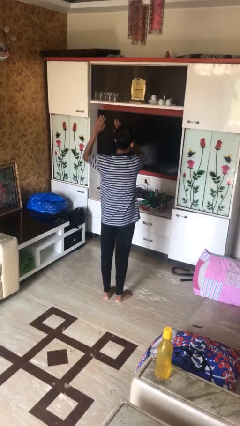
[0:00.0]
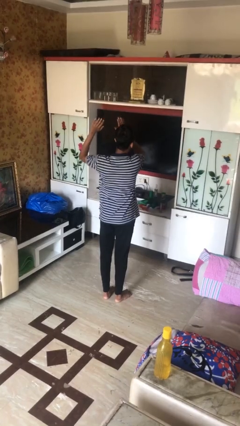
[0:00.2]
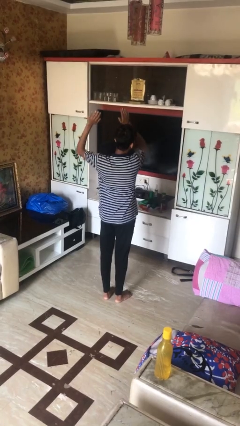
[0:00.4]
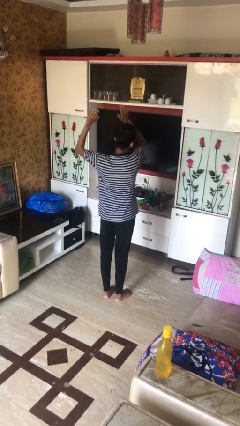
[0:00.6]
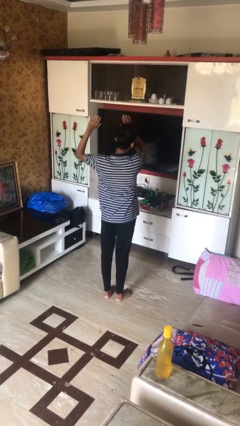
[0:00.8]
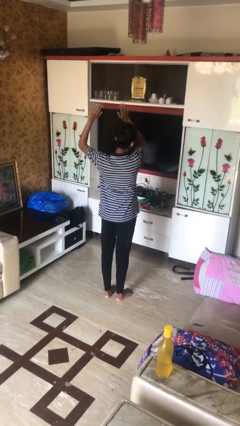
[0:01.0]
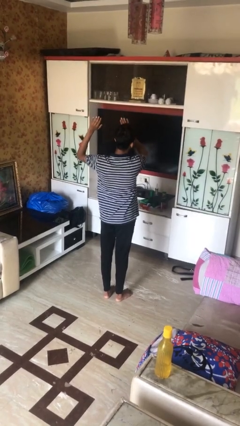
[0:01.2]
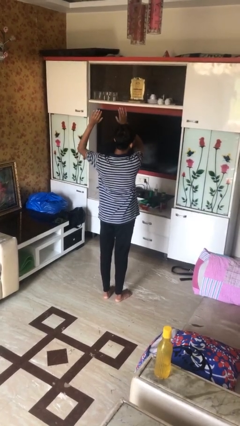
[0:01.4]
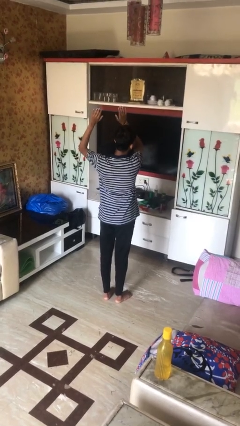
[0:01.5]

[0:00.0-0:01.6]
person dances in place

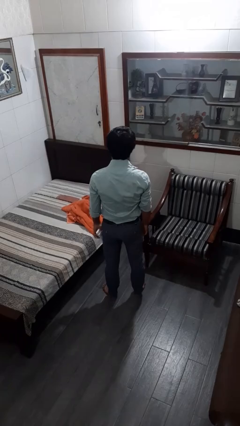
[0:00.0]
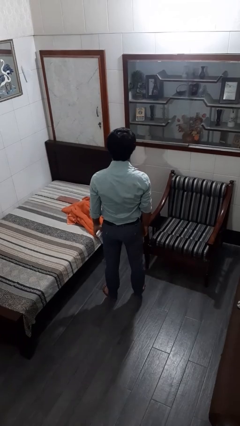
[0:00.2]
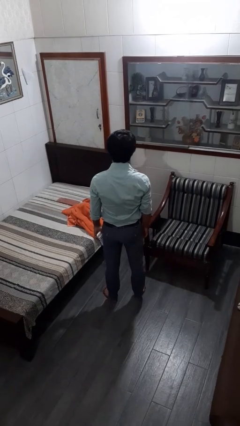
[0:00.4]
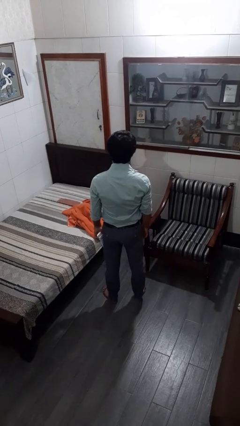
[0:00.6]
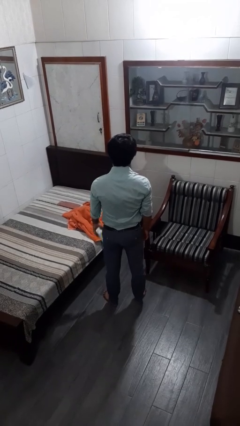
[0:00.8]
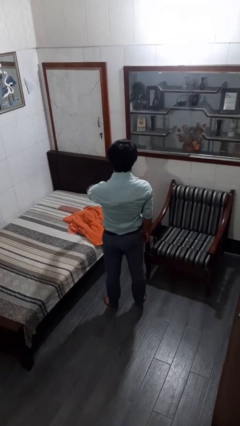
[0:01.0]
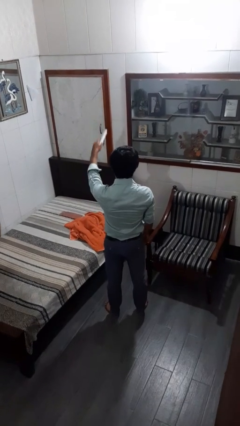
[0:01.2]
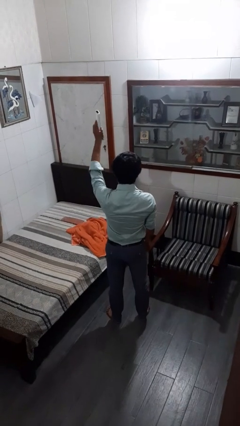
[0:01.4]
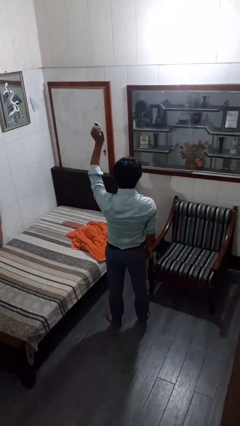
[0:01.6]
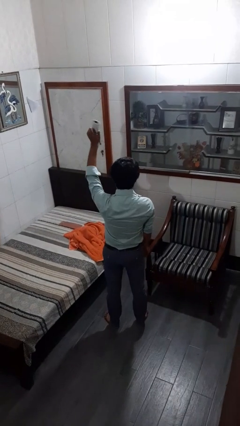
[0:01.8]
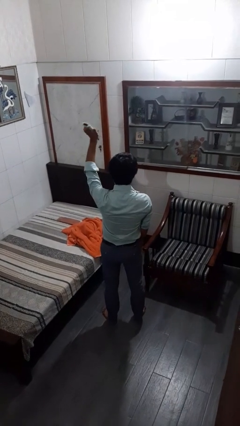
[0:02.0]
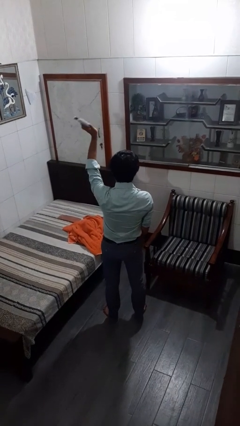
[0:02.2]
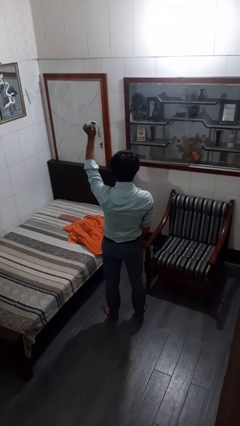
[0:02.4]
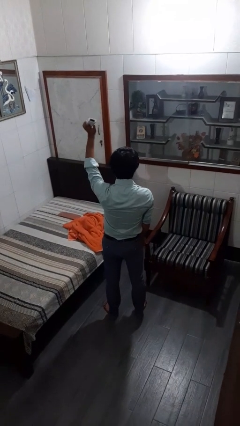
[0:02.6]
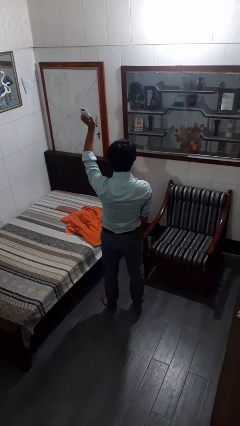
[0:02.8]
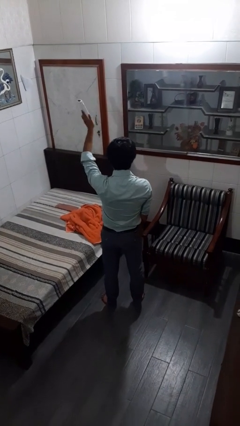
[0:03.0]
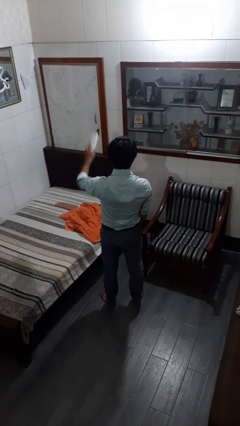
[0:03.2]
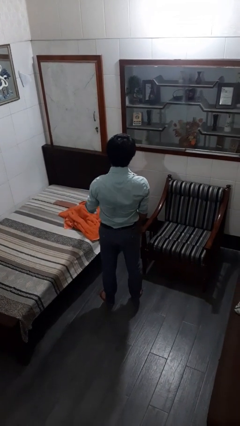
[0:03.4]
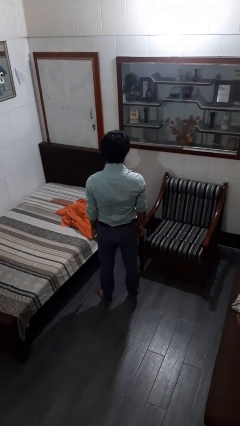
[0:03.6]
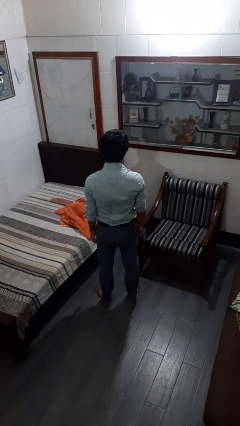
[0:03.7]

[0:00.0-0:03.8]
person holds object above head

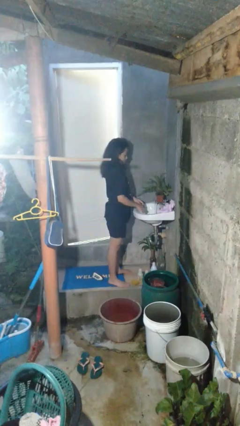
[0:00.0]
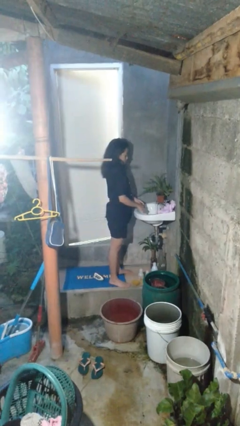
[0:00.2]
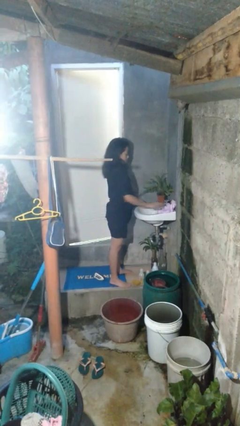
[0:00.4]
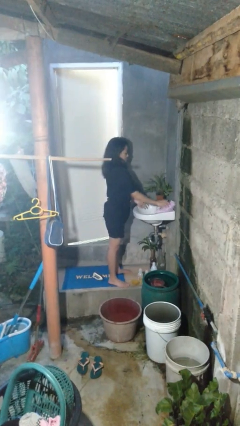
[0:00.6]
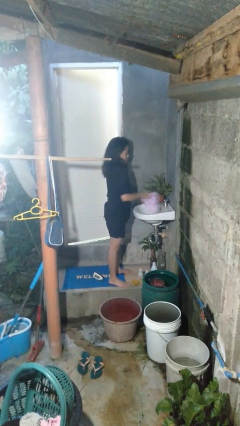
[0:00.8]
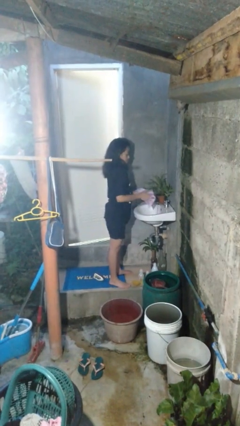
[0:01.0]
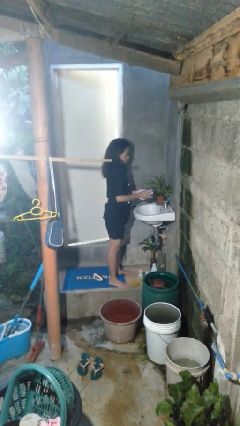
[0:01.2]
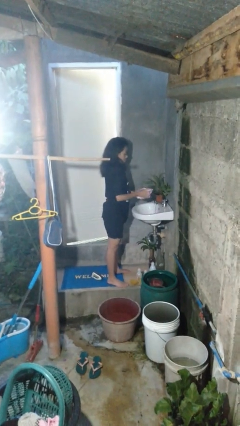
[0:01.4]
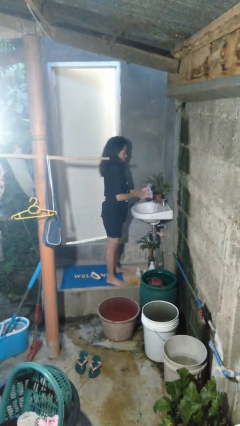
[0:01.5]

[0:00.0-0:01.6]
person dries hands with towel

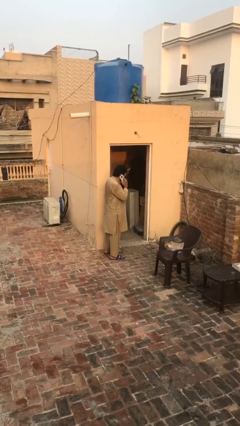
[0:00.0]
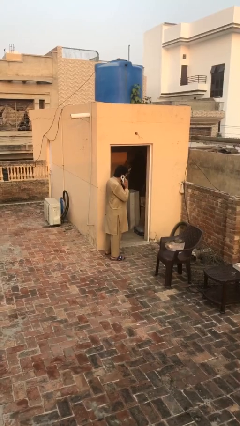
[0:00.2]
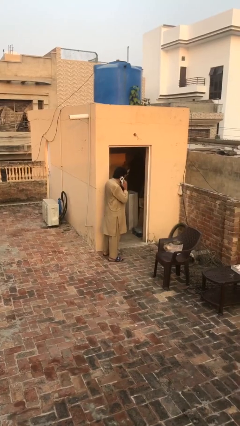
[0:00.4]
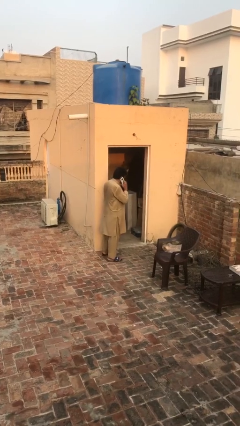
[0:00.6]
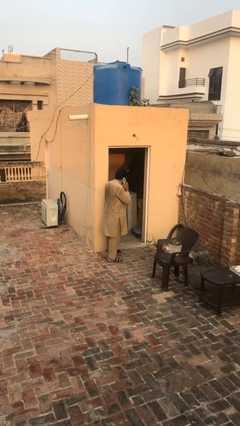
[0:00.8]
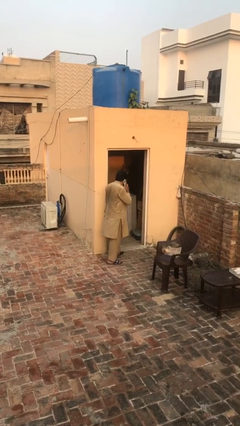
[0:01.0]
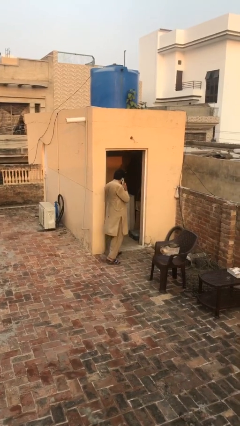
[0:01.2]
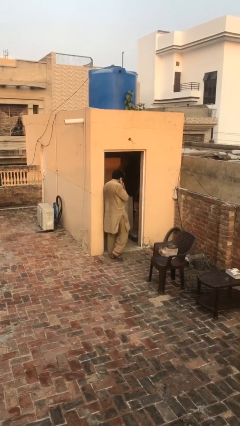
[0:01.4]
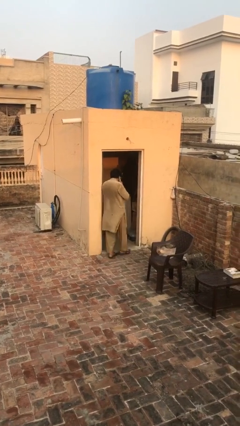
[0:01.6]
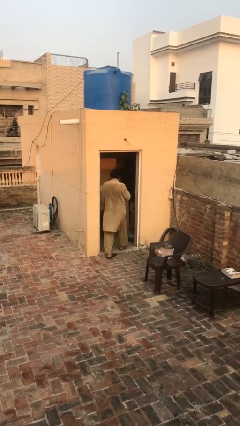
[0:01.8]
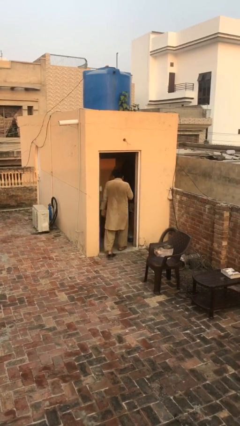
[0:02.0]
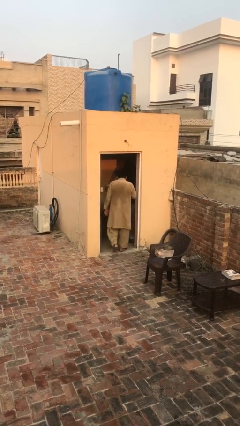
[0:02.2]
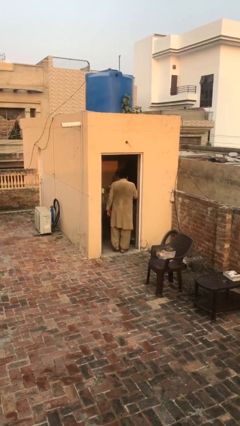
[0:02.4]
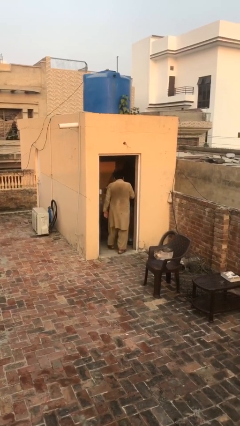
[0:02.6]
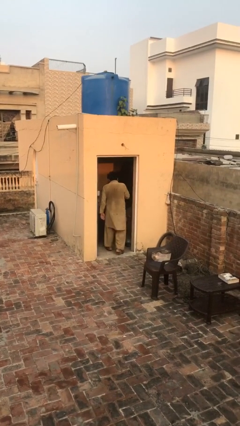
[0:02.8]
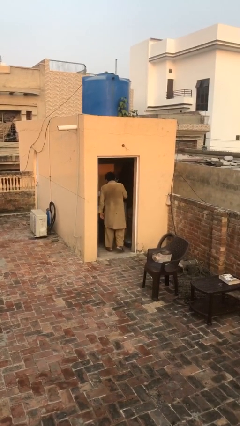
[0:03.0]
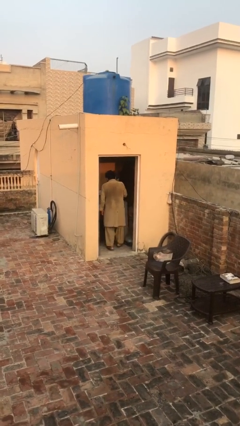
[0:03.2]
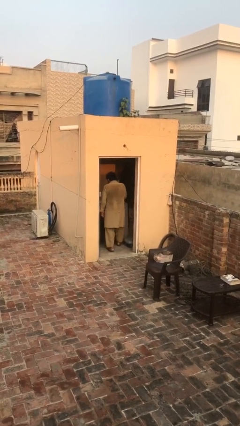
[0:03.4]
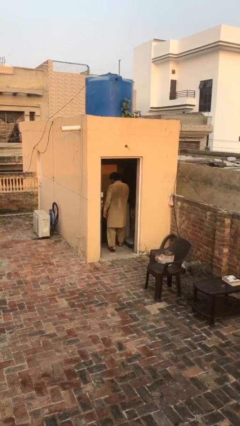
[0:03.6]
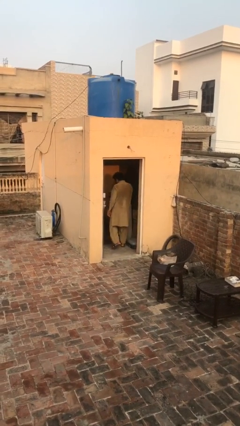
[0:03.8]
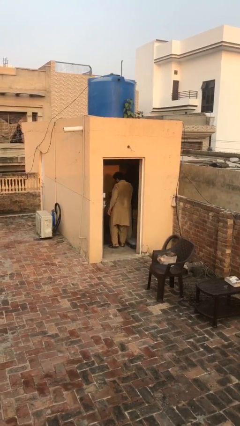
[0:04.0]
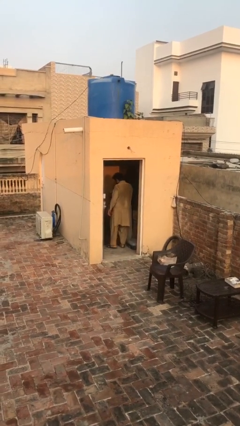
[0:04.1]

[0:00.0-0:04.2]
person exits scene through structure

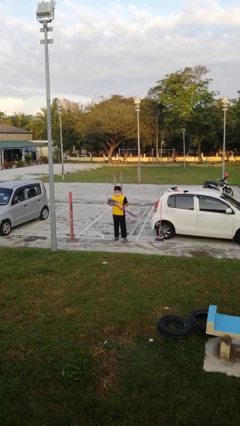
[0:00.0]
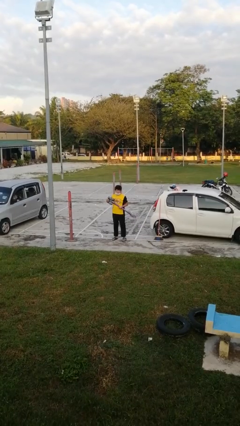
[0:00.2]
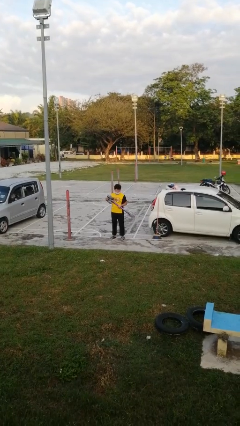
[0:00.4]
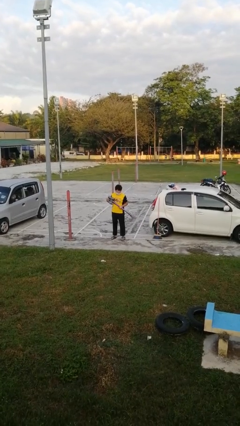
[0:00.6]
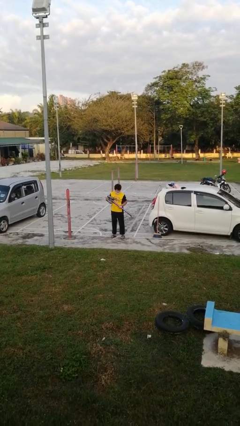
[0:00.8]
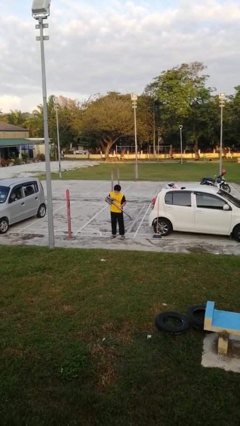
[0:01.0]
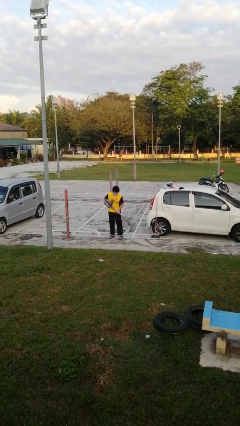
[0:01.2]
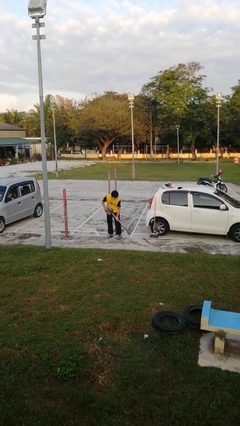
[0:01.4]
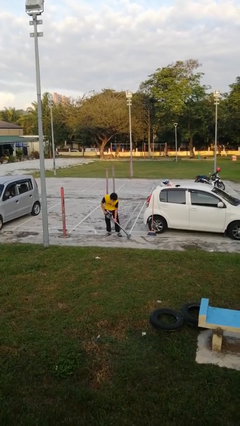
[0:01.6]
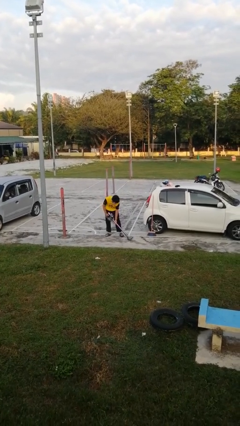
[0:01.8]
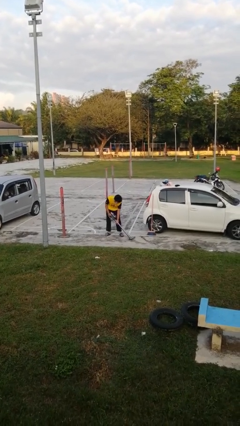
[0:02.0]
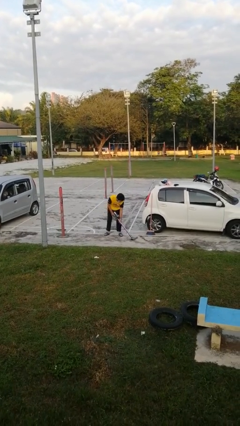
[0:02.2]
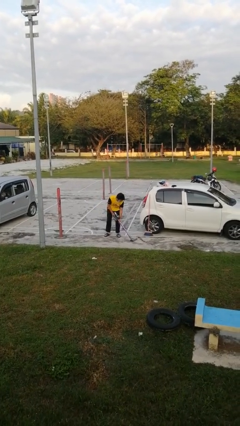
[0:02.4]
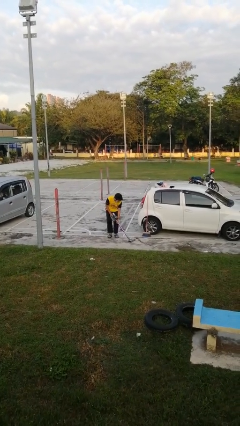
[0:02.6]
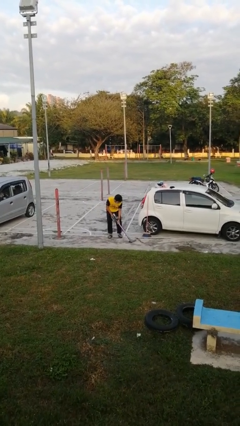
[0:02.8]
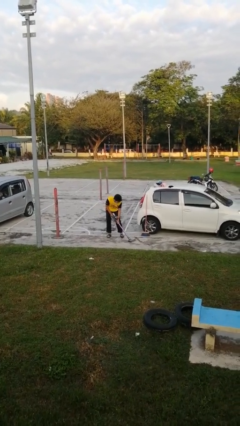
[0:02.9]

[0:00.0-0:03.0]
person vacuums carpet

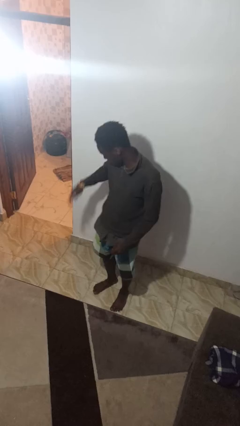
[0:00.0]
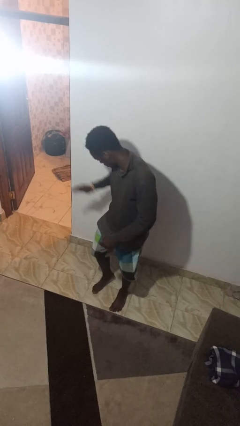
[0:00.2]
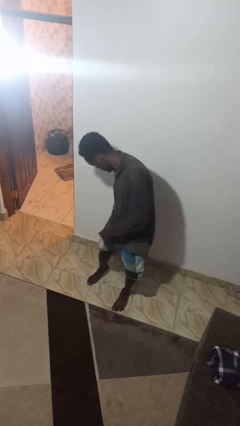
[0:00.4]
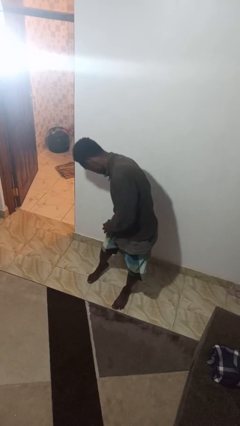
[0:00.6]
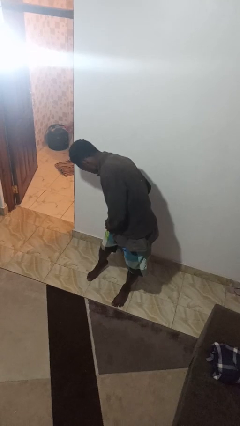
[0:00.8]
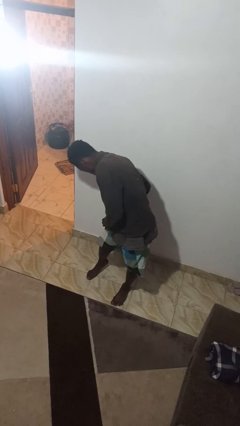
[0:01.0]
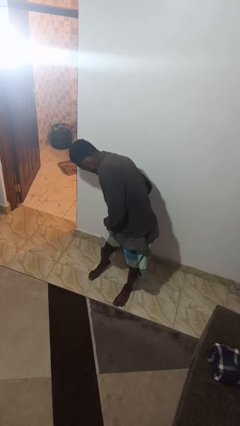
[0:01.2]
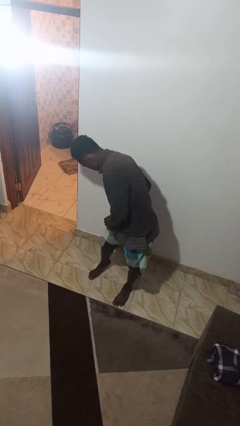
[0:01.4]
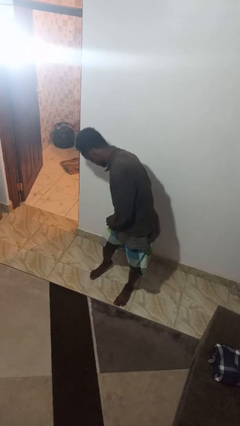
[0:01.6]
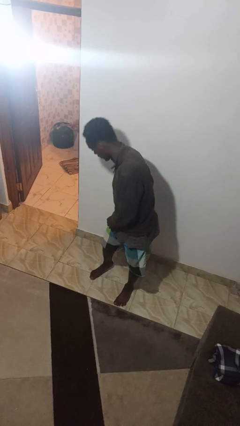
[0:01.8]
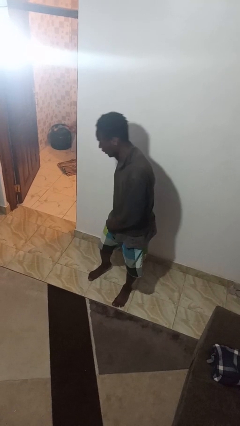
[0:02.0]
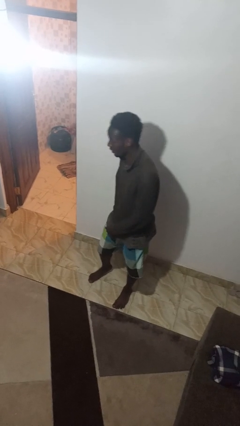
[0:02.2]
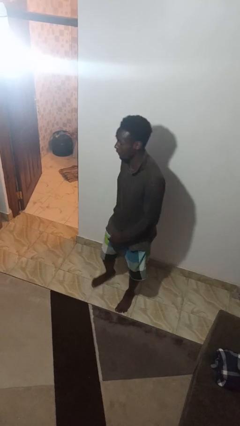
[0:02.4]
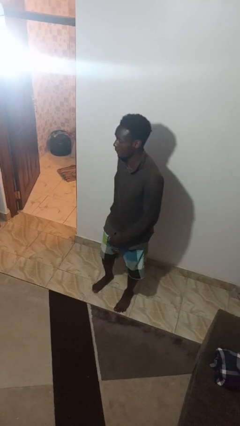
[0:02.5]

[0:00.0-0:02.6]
person swats bug

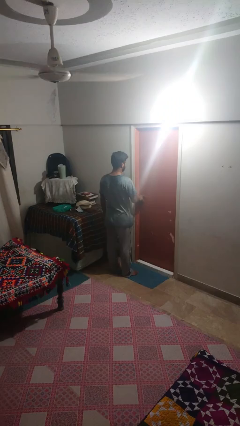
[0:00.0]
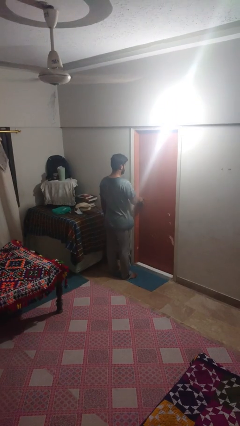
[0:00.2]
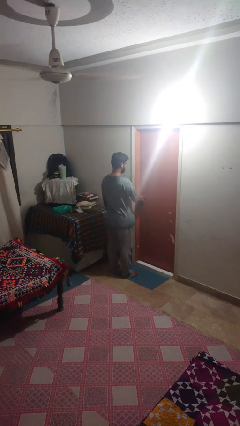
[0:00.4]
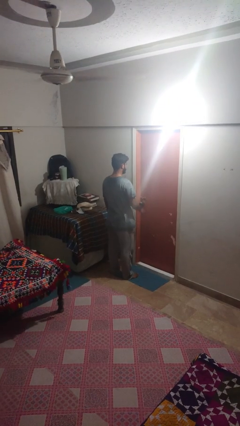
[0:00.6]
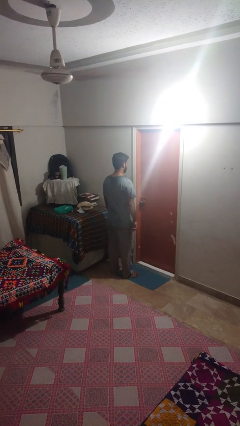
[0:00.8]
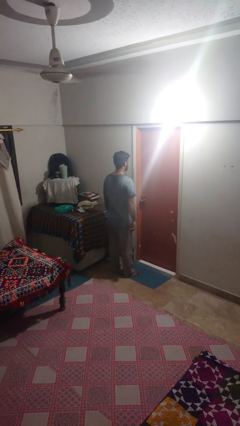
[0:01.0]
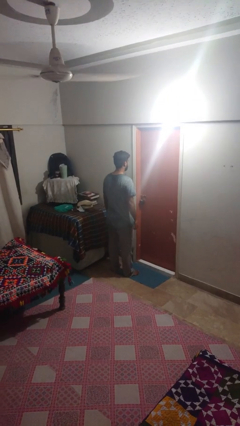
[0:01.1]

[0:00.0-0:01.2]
person locks door with keys
